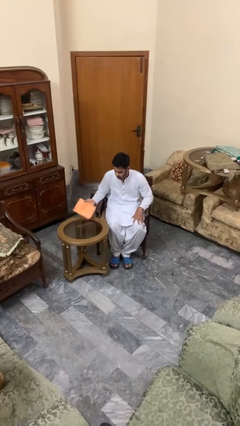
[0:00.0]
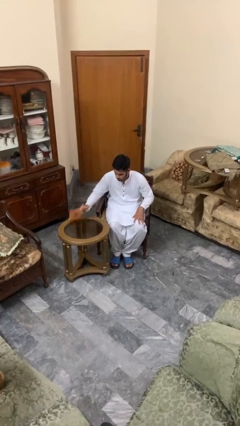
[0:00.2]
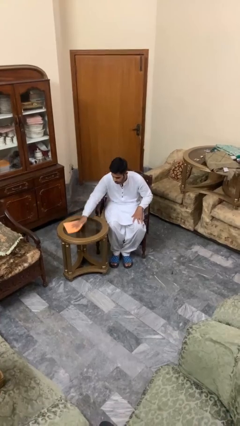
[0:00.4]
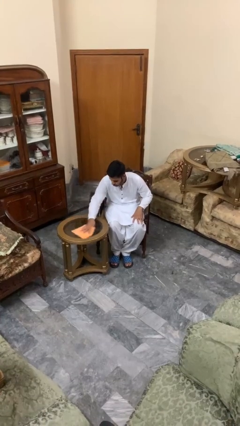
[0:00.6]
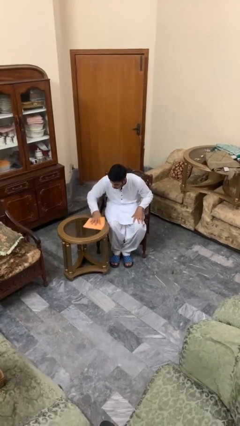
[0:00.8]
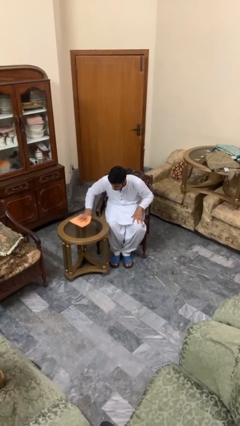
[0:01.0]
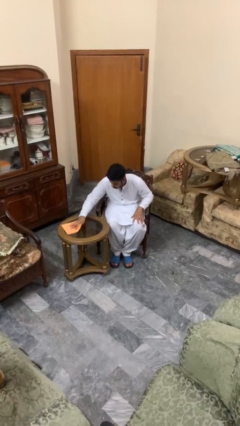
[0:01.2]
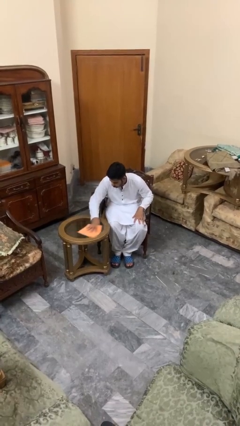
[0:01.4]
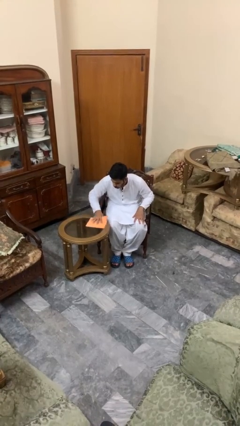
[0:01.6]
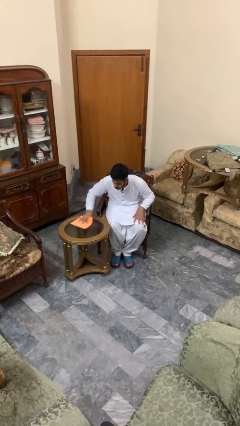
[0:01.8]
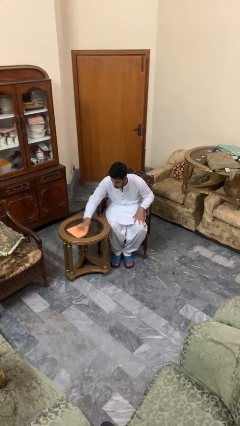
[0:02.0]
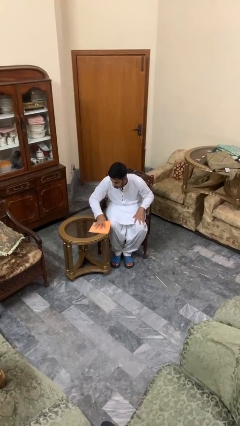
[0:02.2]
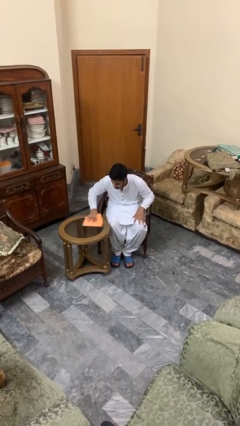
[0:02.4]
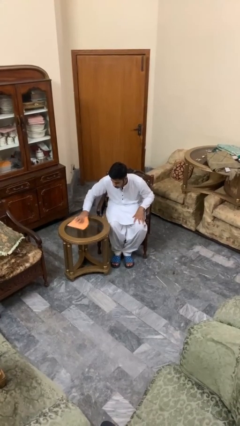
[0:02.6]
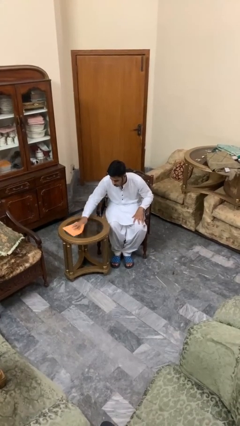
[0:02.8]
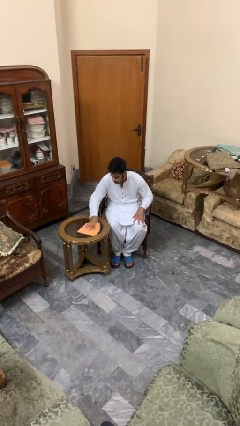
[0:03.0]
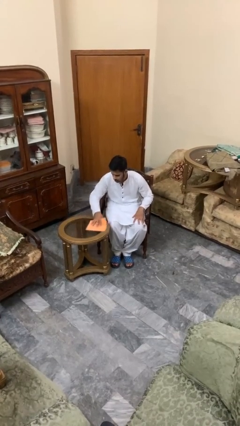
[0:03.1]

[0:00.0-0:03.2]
person cleans table with rag

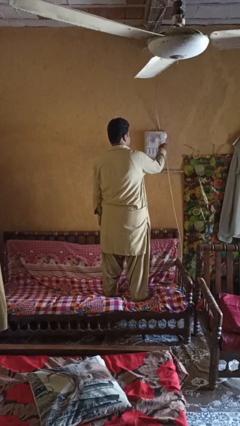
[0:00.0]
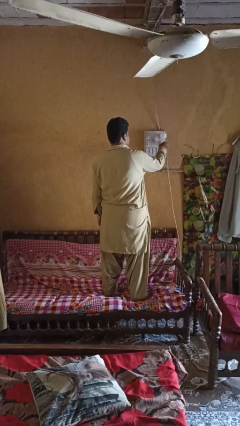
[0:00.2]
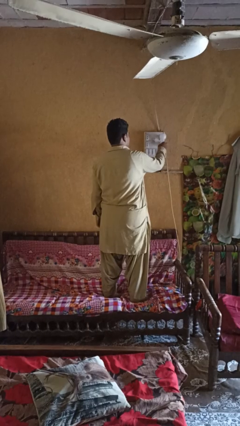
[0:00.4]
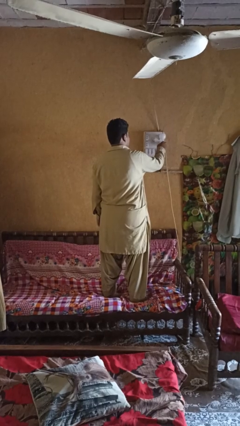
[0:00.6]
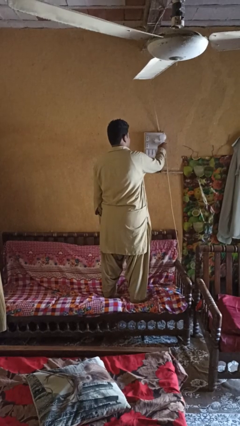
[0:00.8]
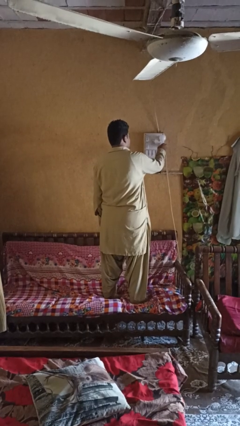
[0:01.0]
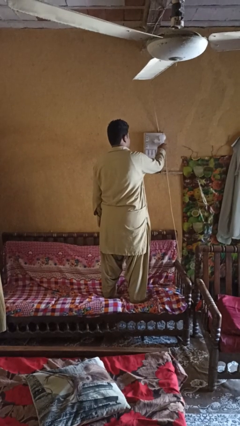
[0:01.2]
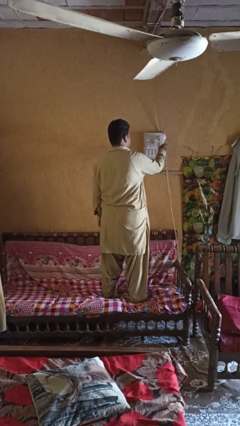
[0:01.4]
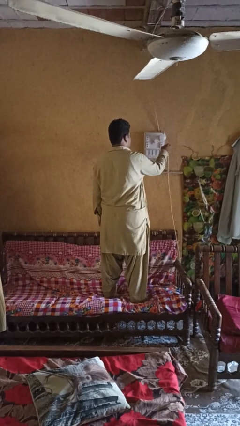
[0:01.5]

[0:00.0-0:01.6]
person plugs into electrical socket

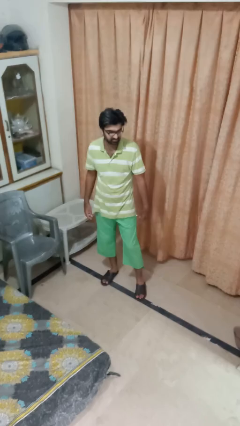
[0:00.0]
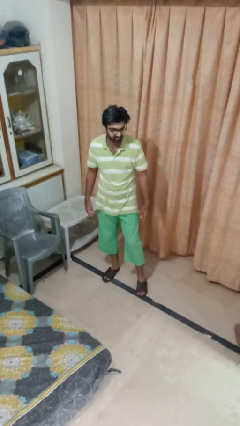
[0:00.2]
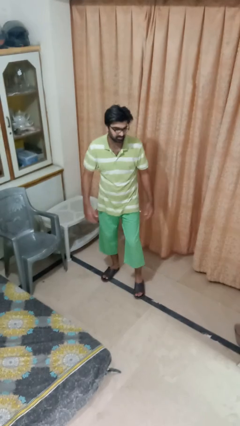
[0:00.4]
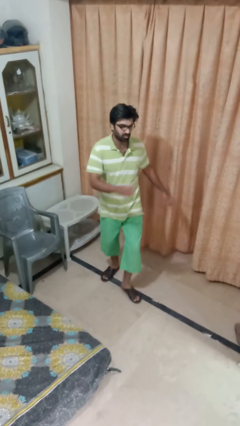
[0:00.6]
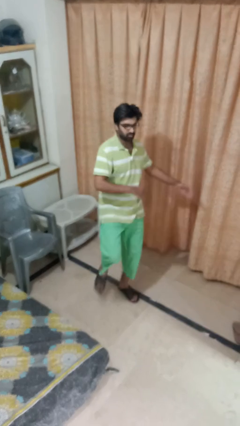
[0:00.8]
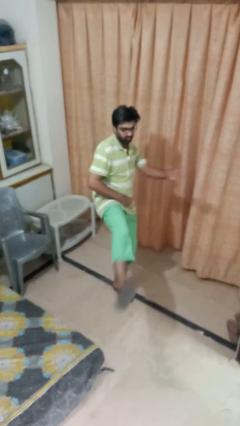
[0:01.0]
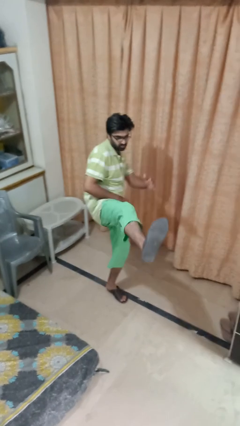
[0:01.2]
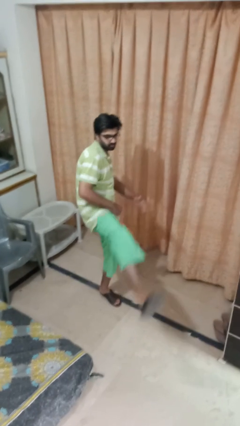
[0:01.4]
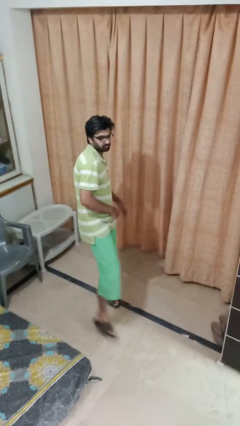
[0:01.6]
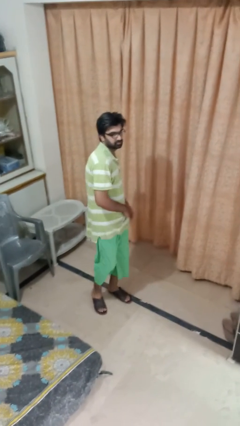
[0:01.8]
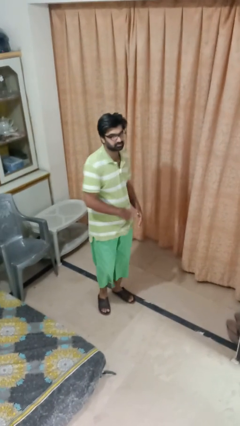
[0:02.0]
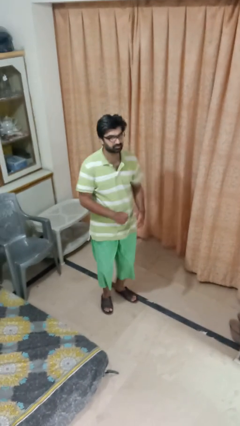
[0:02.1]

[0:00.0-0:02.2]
person karate kicks

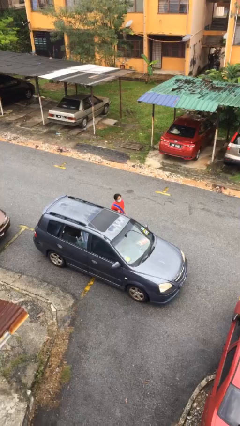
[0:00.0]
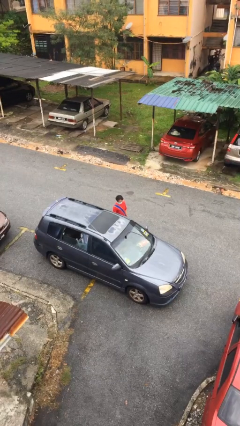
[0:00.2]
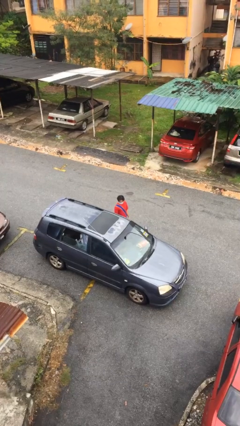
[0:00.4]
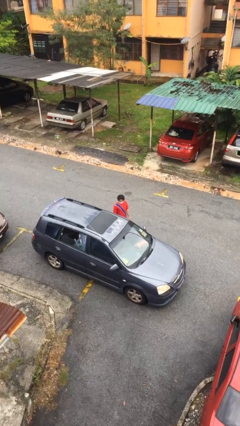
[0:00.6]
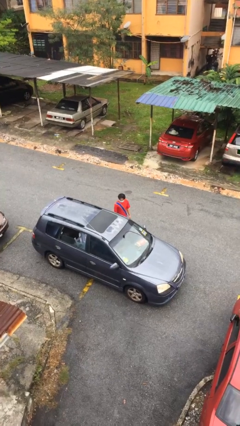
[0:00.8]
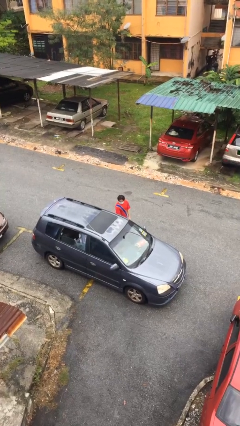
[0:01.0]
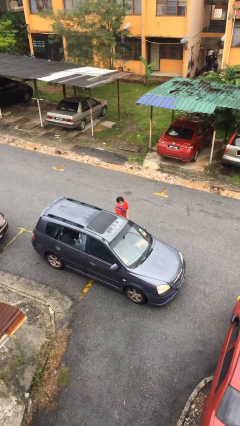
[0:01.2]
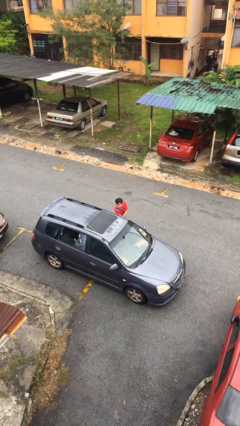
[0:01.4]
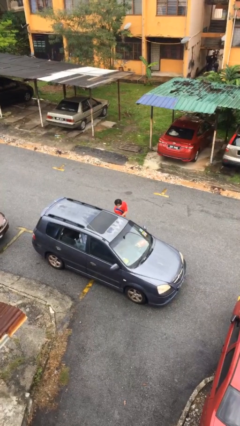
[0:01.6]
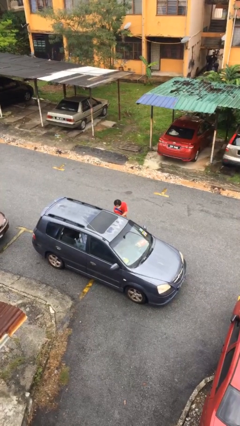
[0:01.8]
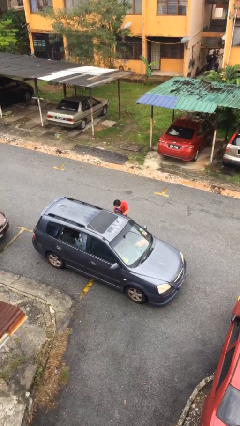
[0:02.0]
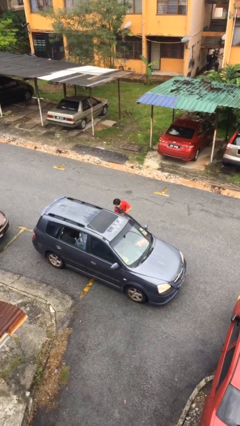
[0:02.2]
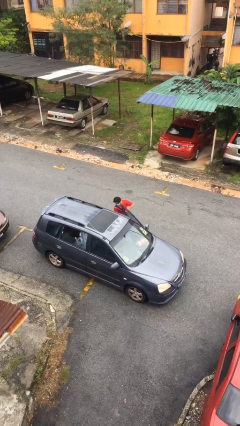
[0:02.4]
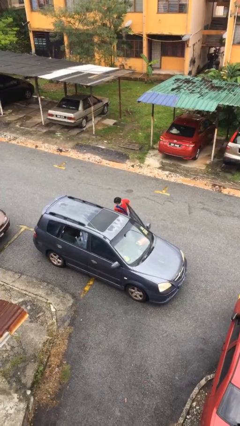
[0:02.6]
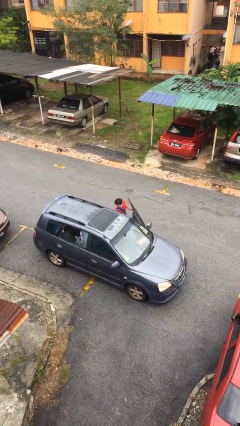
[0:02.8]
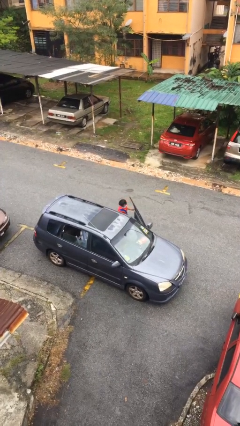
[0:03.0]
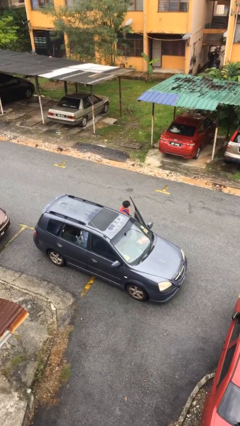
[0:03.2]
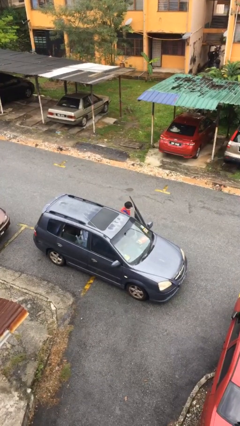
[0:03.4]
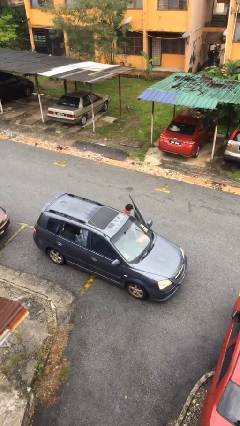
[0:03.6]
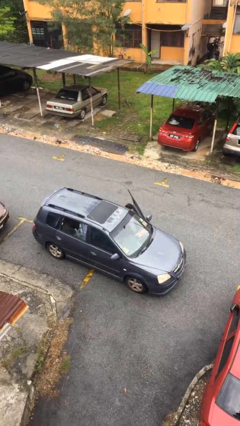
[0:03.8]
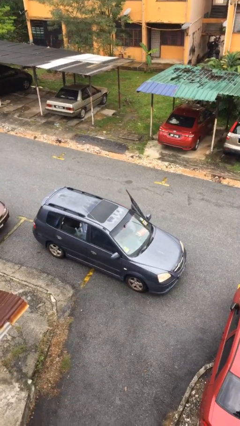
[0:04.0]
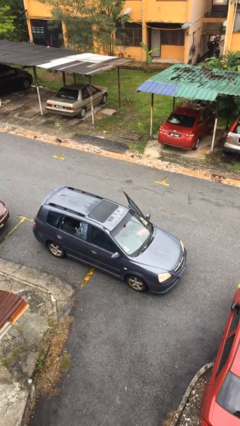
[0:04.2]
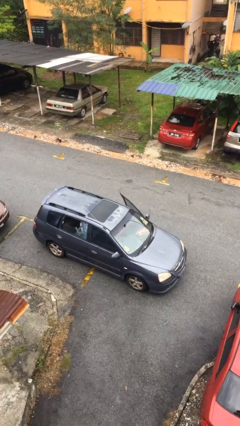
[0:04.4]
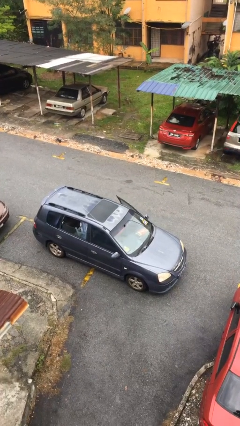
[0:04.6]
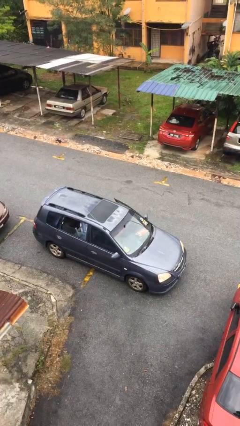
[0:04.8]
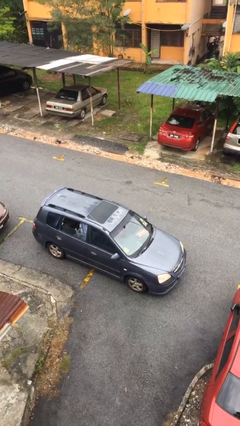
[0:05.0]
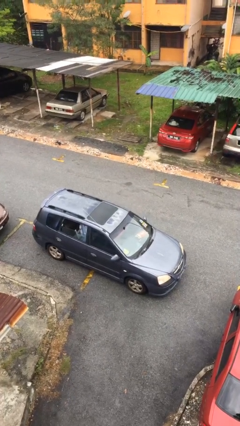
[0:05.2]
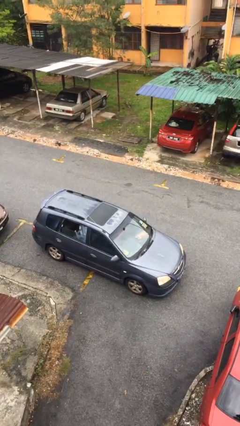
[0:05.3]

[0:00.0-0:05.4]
person enters car

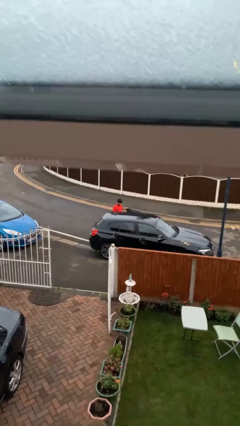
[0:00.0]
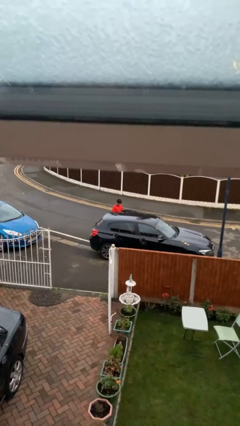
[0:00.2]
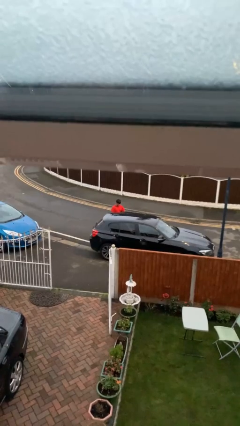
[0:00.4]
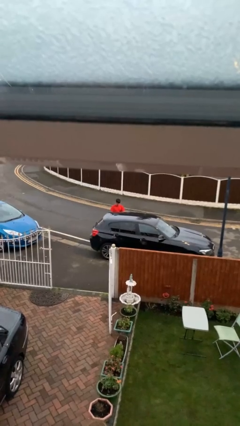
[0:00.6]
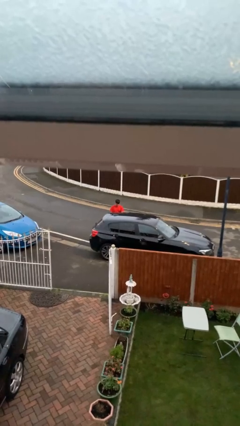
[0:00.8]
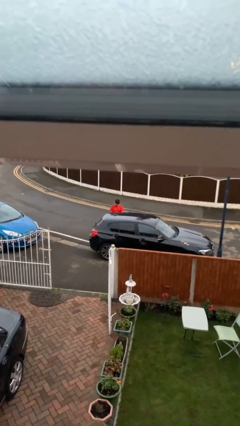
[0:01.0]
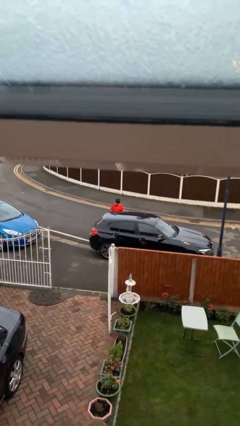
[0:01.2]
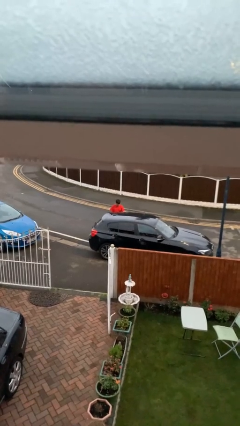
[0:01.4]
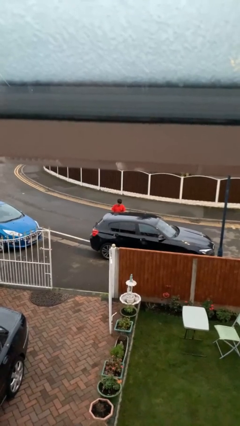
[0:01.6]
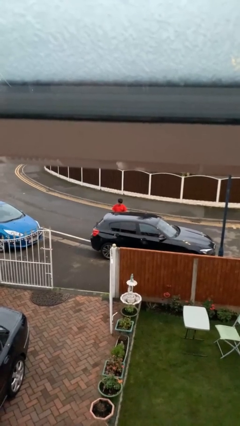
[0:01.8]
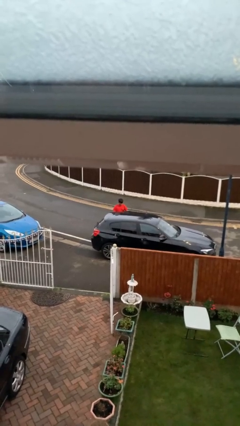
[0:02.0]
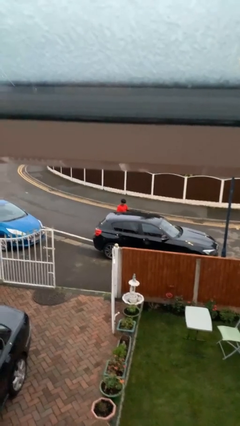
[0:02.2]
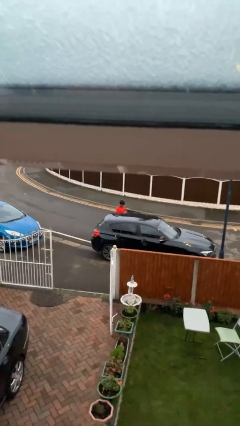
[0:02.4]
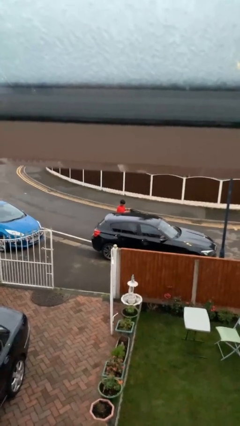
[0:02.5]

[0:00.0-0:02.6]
person closes car door

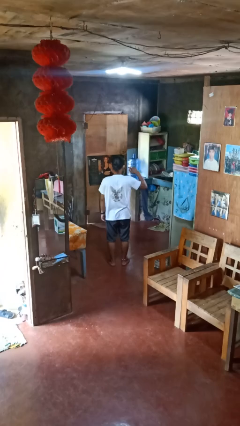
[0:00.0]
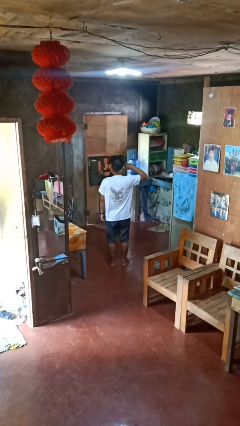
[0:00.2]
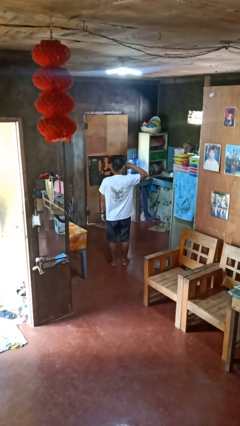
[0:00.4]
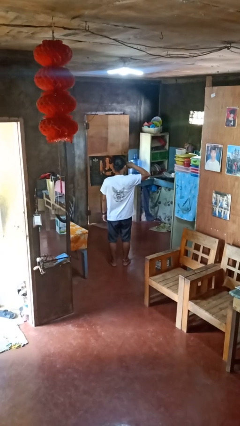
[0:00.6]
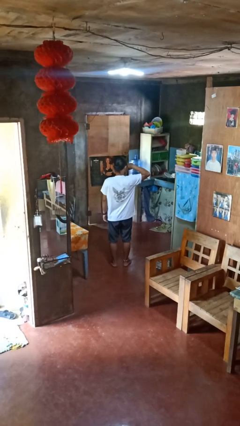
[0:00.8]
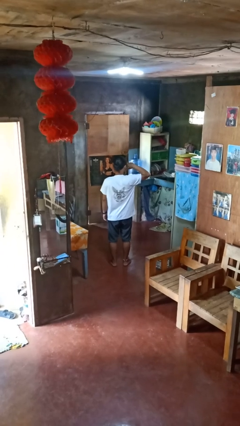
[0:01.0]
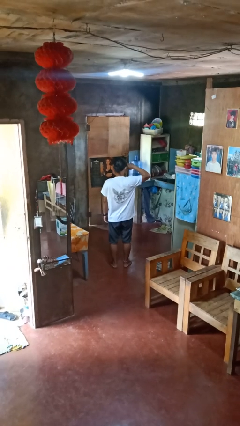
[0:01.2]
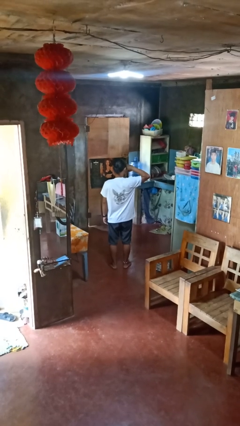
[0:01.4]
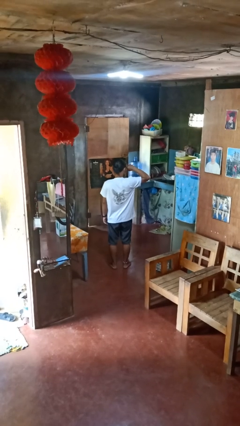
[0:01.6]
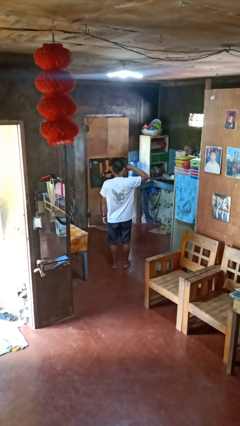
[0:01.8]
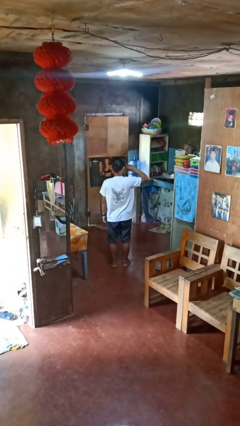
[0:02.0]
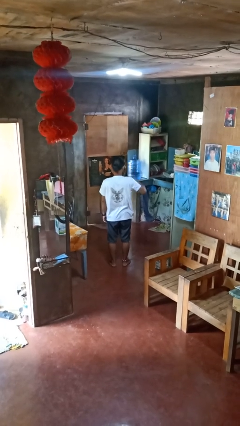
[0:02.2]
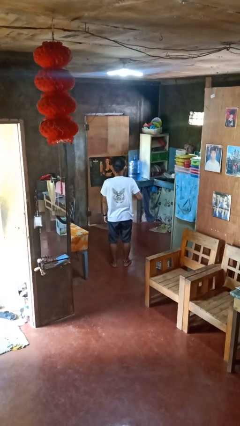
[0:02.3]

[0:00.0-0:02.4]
person rubs eyes
